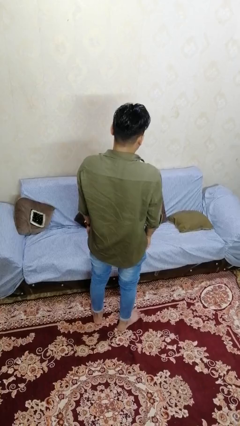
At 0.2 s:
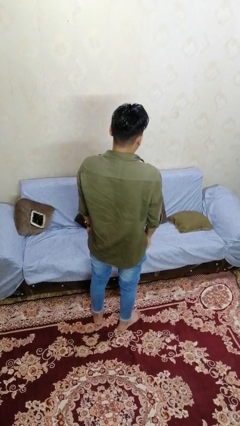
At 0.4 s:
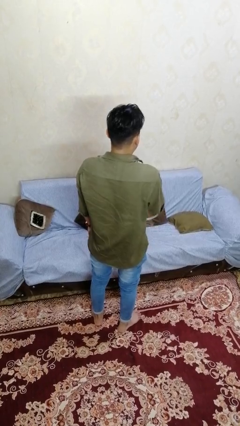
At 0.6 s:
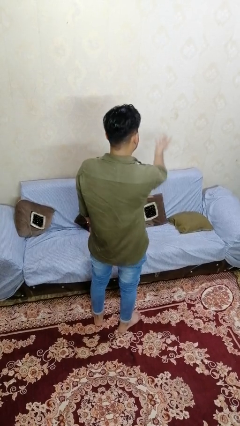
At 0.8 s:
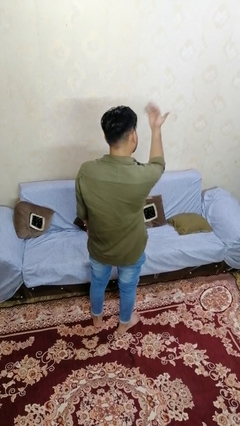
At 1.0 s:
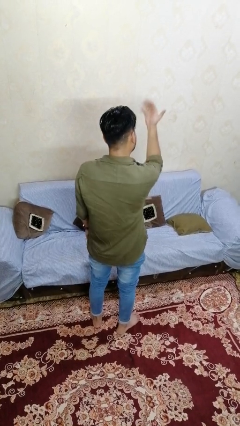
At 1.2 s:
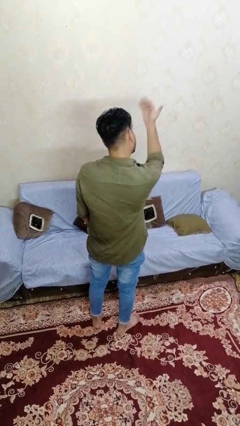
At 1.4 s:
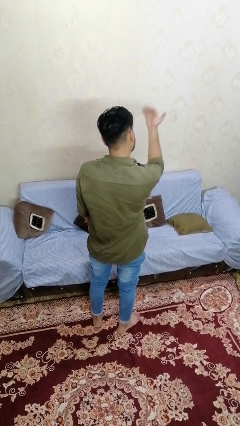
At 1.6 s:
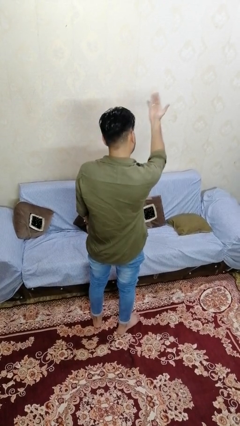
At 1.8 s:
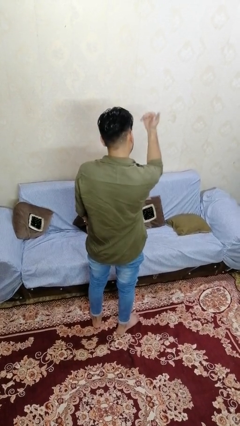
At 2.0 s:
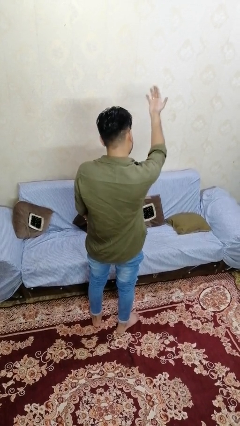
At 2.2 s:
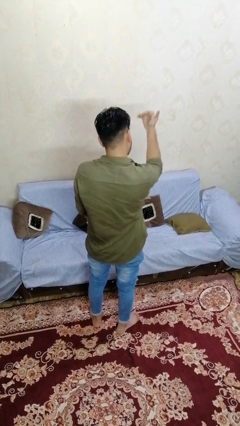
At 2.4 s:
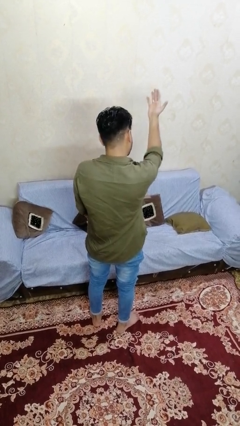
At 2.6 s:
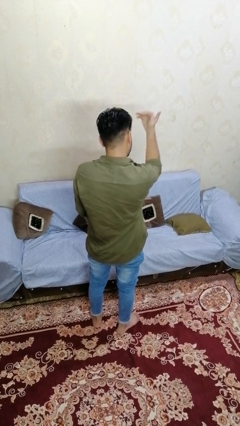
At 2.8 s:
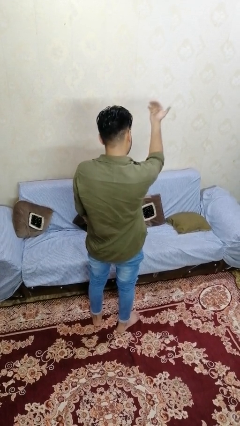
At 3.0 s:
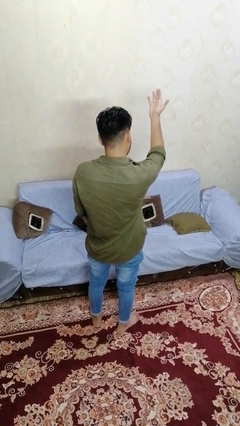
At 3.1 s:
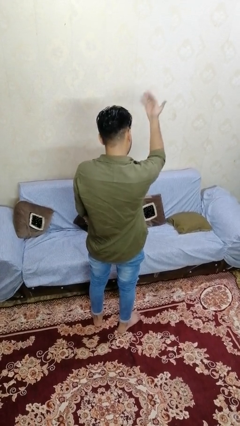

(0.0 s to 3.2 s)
person gestures come here

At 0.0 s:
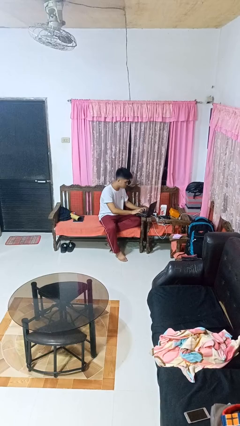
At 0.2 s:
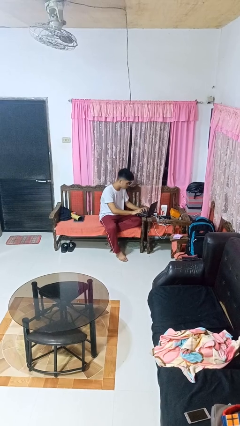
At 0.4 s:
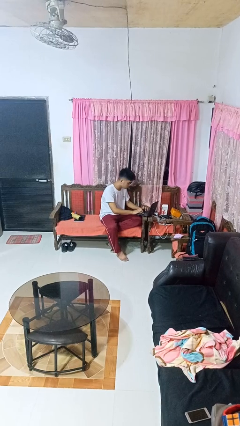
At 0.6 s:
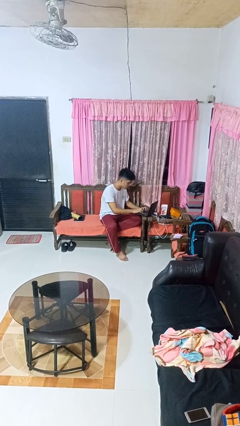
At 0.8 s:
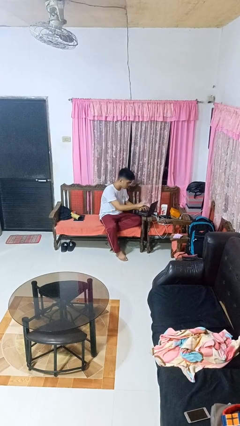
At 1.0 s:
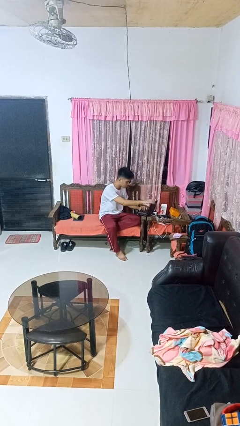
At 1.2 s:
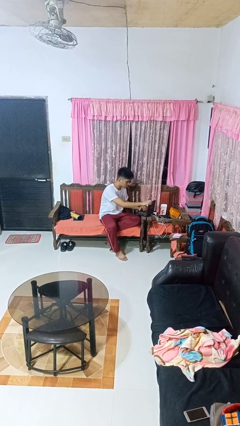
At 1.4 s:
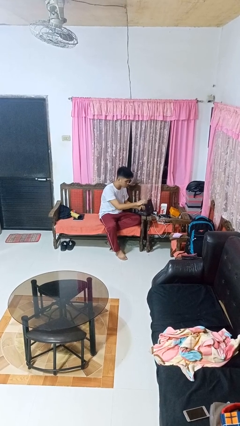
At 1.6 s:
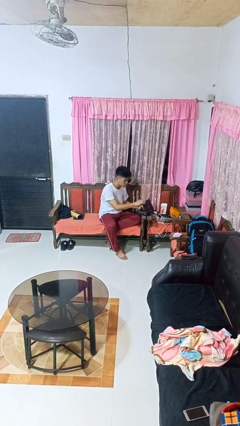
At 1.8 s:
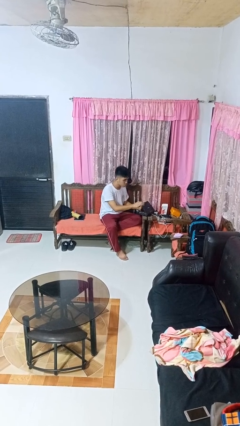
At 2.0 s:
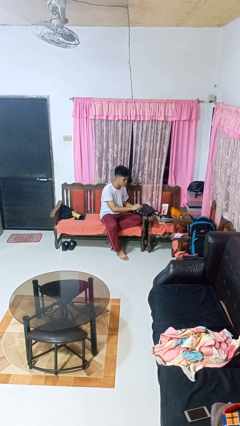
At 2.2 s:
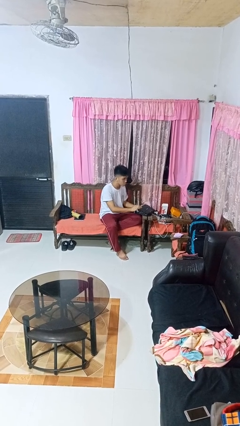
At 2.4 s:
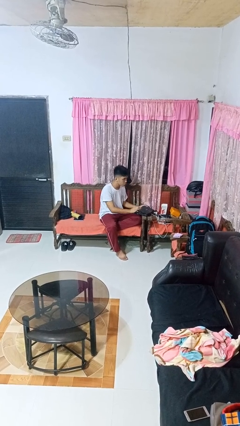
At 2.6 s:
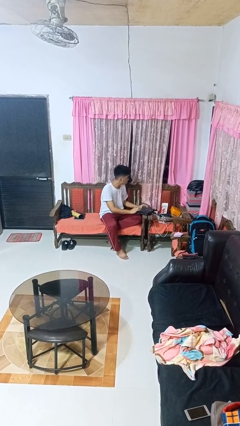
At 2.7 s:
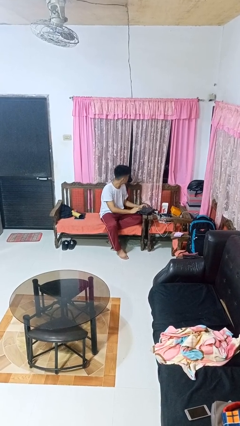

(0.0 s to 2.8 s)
person closes laptop

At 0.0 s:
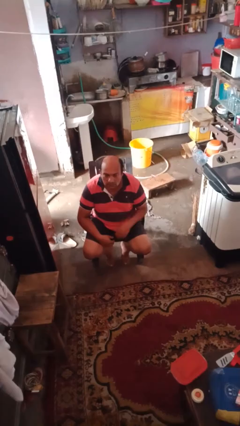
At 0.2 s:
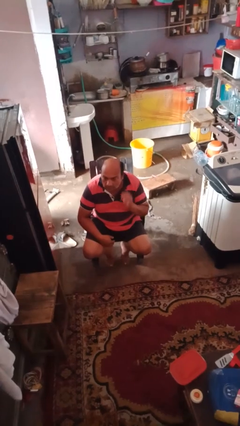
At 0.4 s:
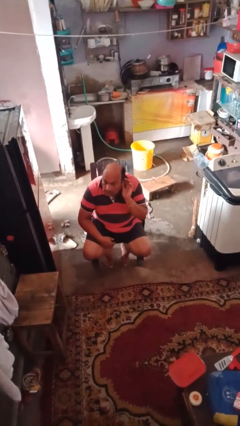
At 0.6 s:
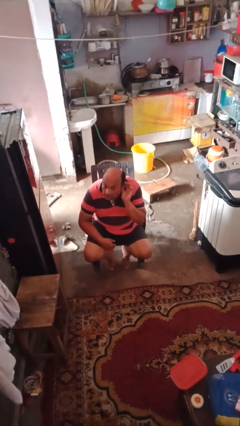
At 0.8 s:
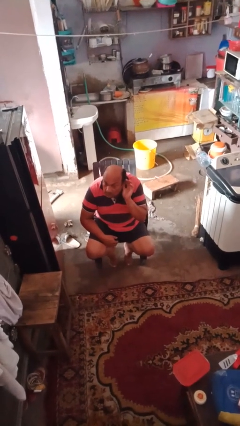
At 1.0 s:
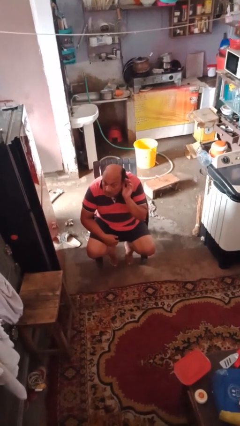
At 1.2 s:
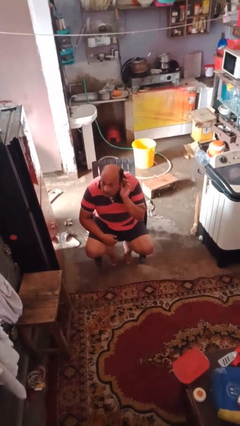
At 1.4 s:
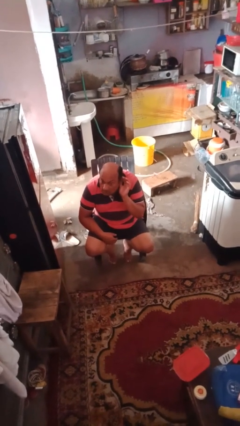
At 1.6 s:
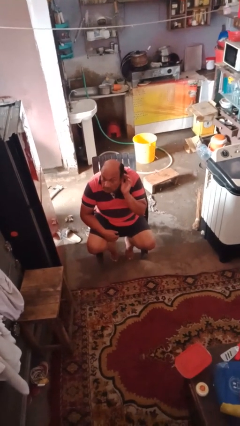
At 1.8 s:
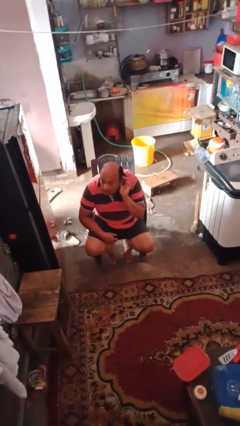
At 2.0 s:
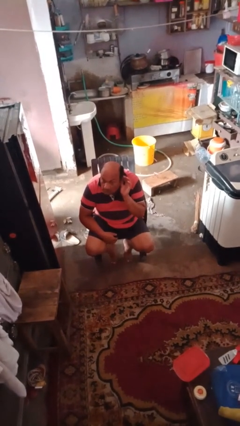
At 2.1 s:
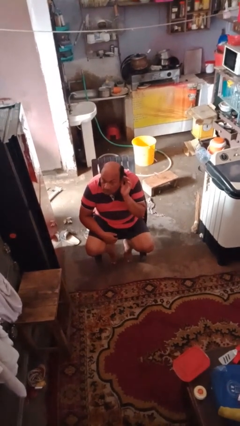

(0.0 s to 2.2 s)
person gestures listen closely

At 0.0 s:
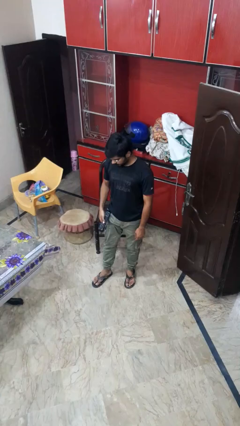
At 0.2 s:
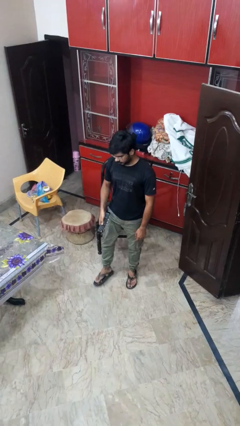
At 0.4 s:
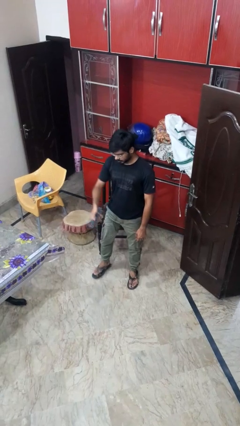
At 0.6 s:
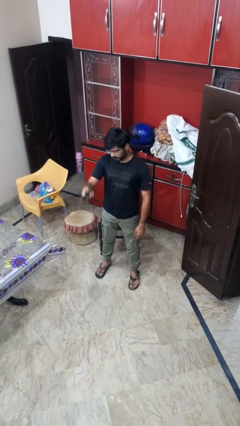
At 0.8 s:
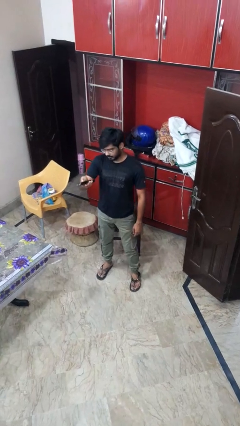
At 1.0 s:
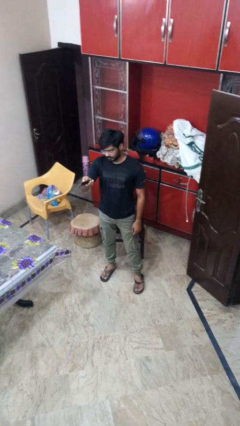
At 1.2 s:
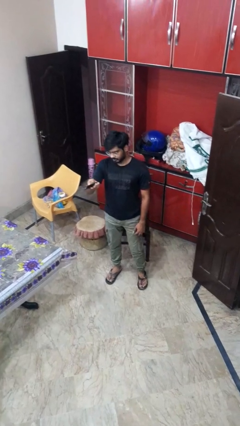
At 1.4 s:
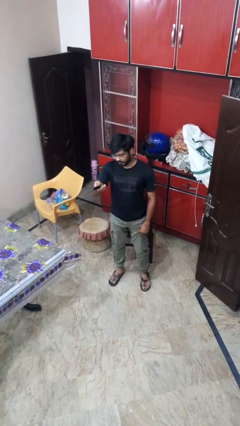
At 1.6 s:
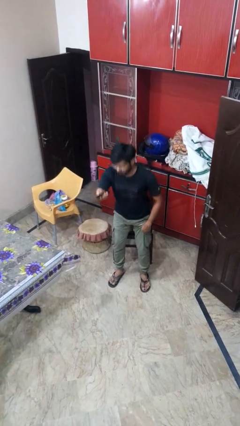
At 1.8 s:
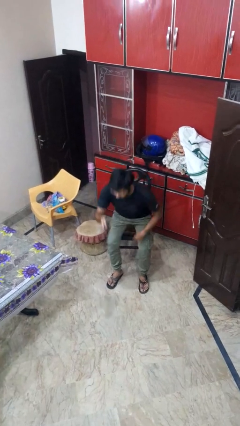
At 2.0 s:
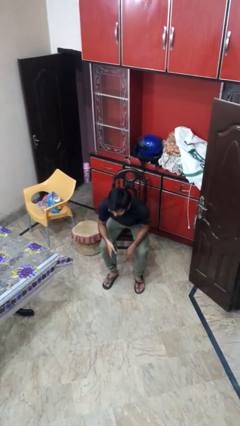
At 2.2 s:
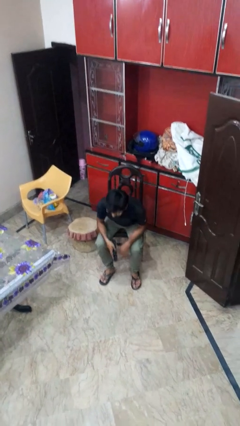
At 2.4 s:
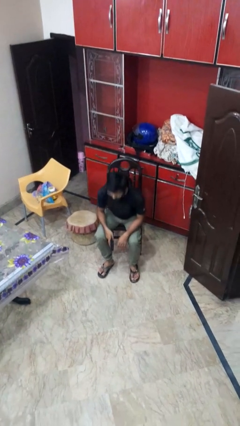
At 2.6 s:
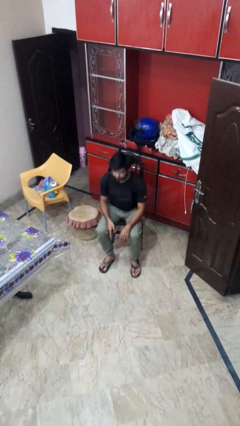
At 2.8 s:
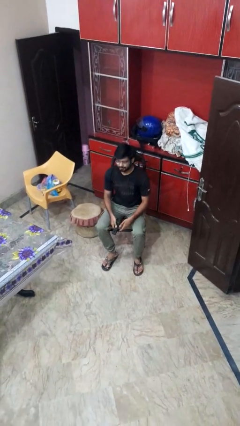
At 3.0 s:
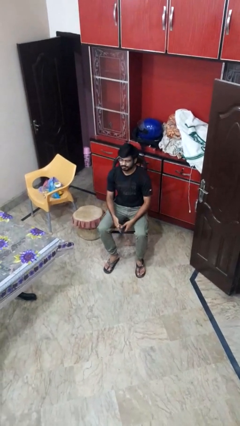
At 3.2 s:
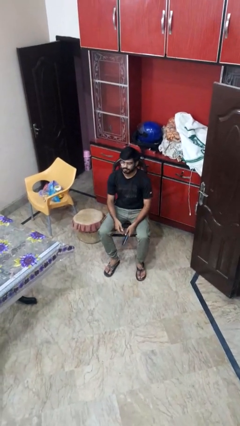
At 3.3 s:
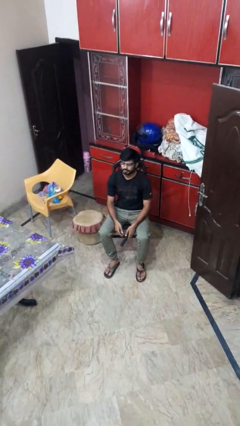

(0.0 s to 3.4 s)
person uses television remote

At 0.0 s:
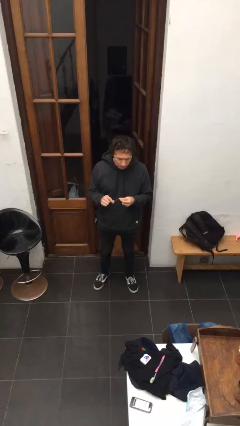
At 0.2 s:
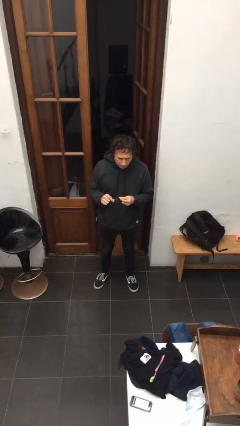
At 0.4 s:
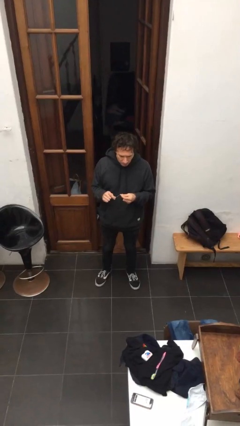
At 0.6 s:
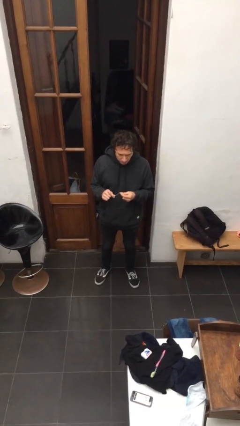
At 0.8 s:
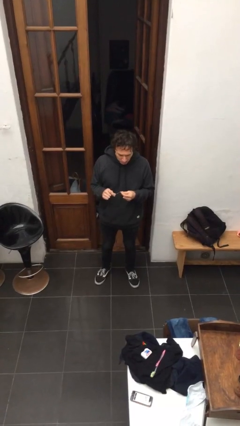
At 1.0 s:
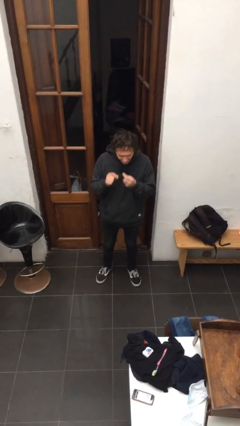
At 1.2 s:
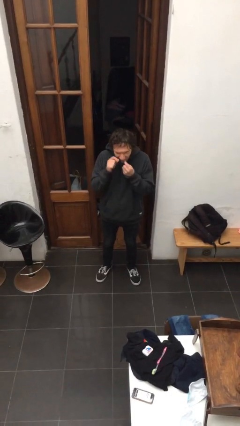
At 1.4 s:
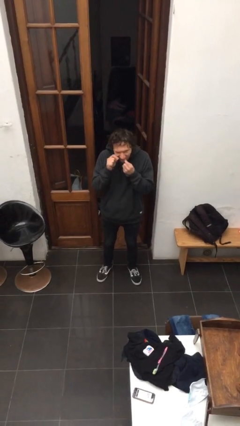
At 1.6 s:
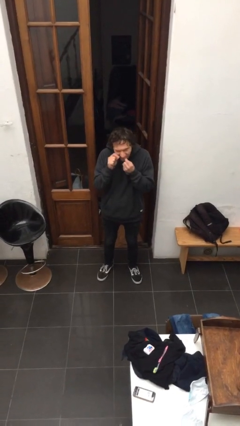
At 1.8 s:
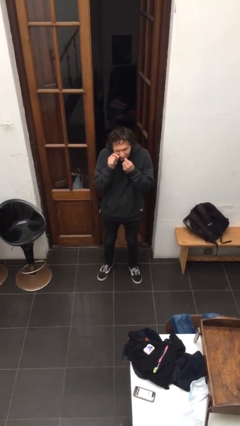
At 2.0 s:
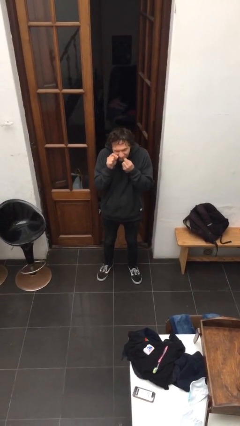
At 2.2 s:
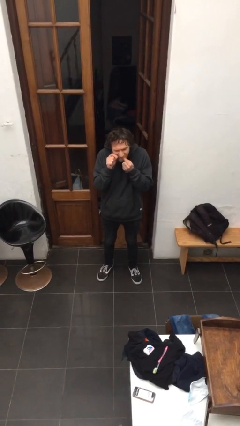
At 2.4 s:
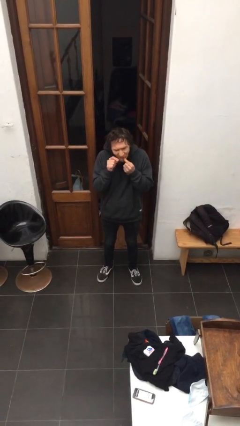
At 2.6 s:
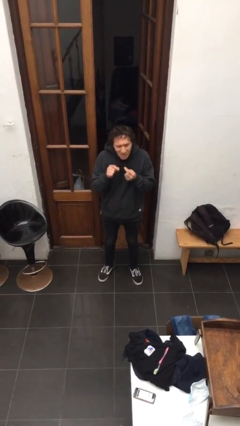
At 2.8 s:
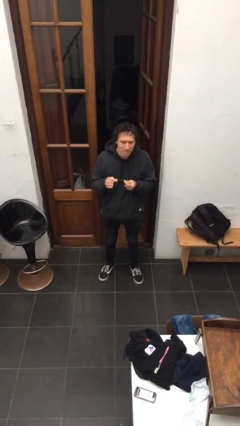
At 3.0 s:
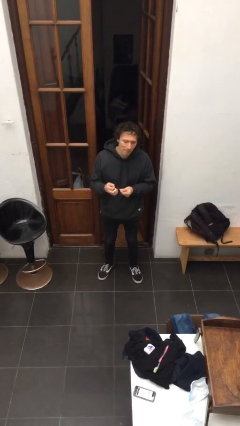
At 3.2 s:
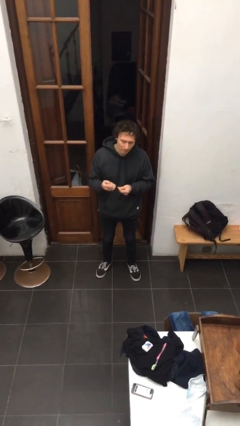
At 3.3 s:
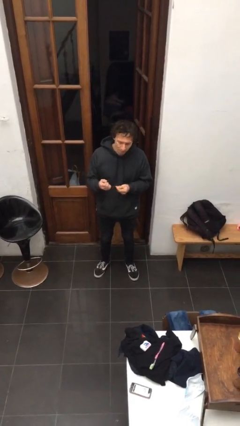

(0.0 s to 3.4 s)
person flosses

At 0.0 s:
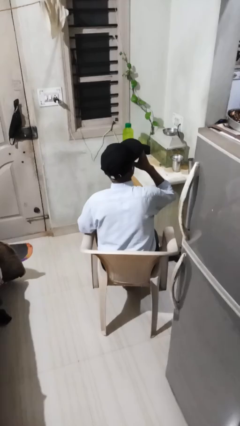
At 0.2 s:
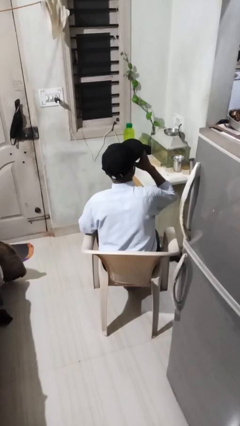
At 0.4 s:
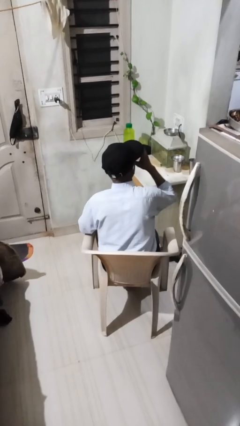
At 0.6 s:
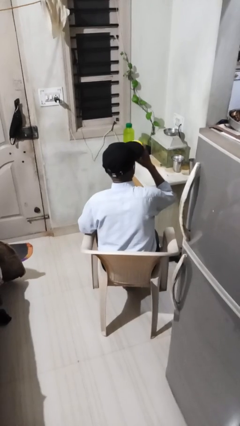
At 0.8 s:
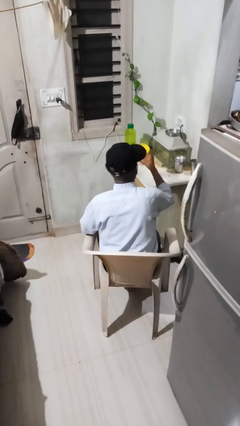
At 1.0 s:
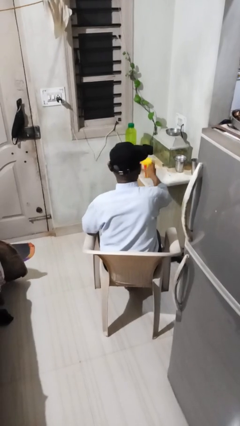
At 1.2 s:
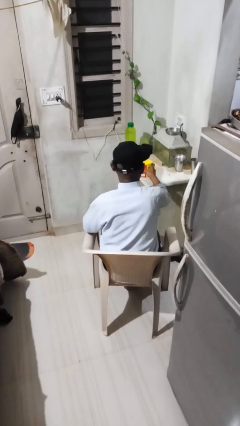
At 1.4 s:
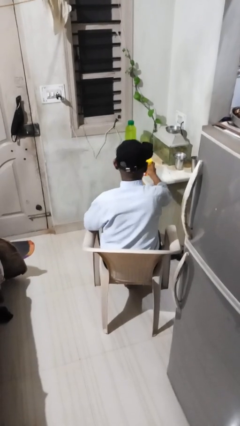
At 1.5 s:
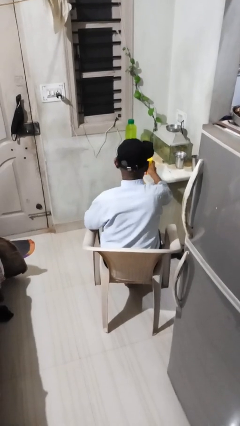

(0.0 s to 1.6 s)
person puts down object on table

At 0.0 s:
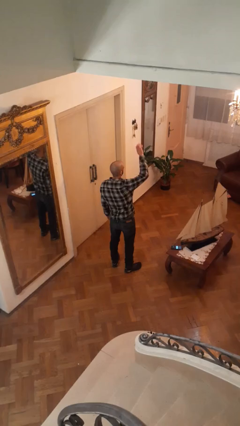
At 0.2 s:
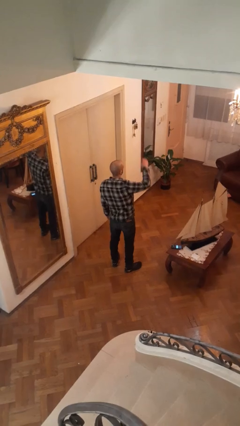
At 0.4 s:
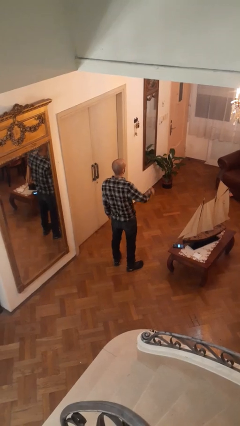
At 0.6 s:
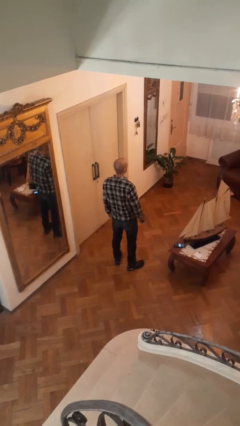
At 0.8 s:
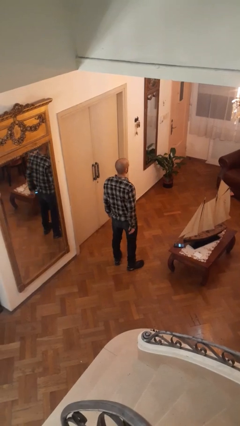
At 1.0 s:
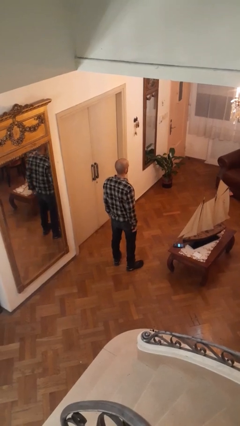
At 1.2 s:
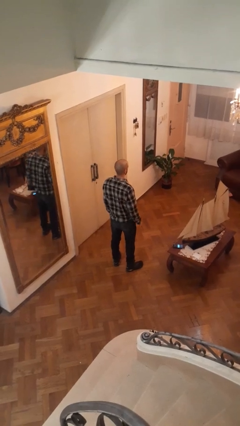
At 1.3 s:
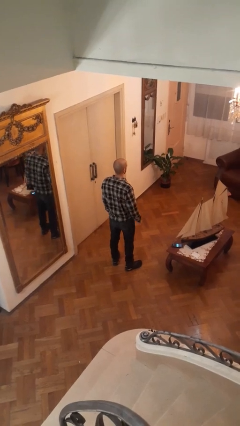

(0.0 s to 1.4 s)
person gestures lower hand
